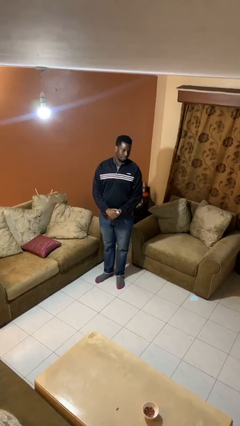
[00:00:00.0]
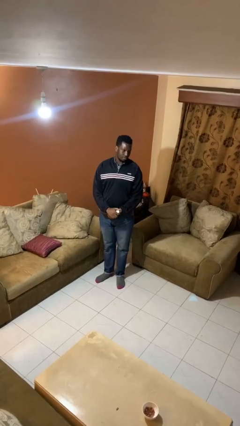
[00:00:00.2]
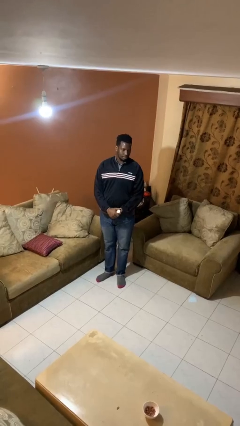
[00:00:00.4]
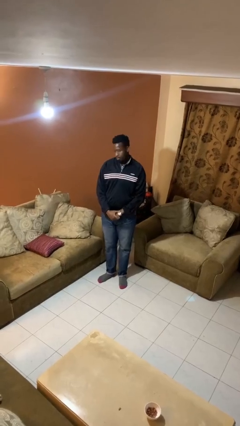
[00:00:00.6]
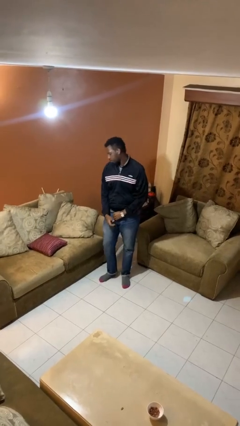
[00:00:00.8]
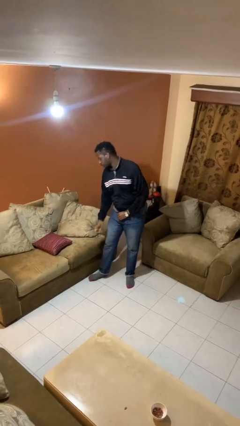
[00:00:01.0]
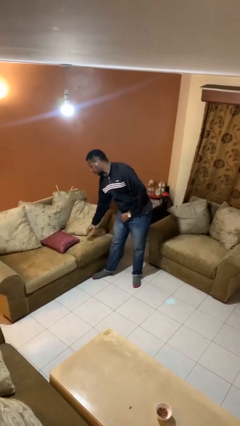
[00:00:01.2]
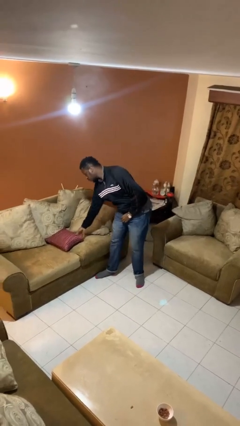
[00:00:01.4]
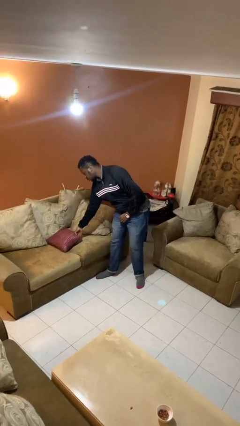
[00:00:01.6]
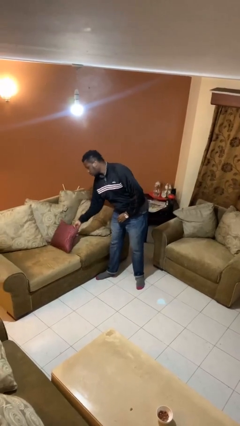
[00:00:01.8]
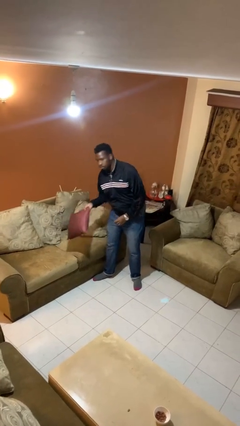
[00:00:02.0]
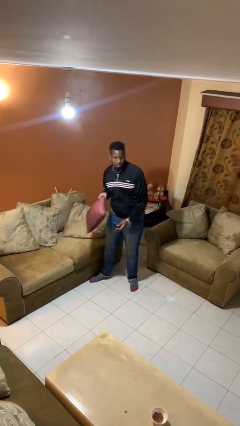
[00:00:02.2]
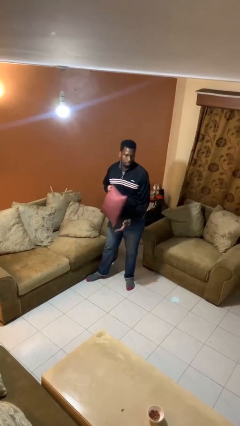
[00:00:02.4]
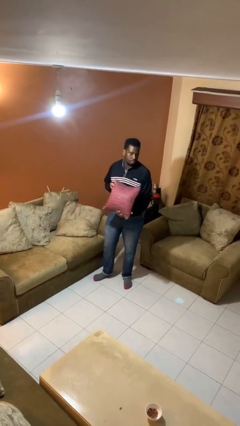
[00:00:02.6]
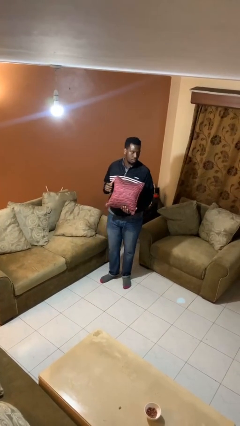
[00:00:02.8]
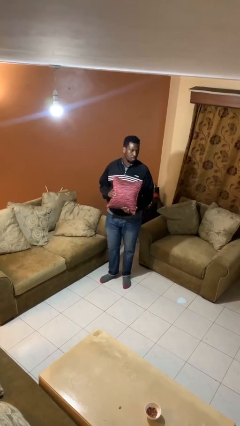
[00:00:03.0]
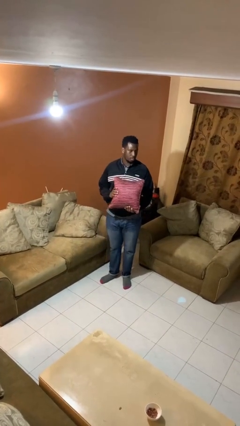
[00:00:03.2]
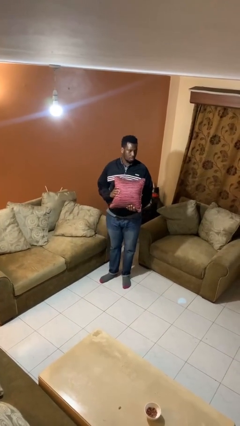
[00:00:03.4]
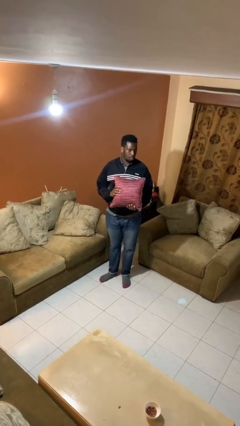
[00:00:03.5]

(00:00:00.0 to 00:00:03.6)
person picks up object from couch

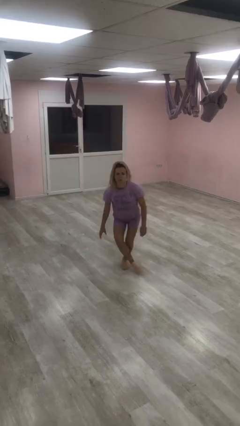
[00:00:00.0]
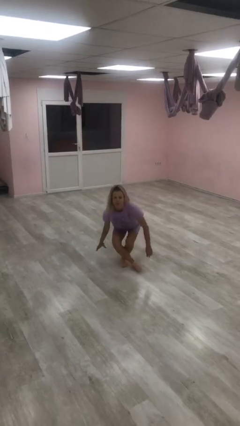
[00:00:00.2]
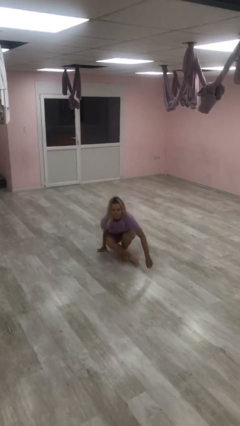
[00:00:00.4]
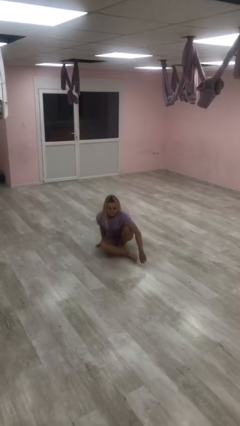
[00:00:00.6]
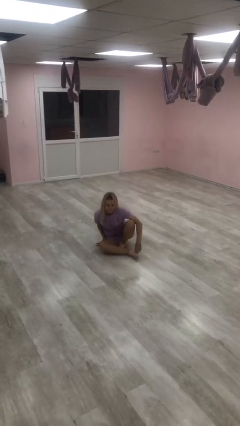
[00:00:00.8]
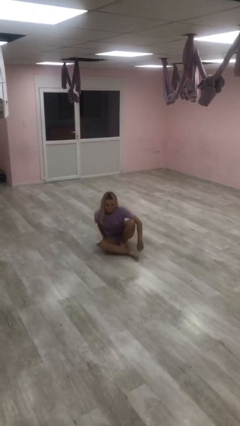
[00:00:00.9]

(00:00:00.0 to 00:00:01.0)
person sits crisscross

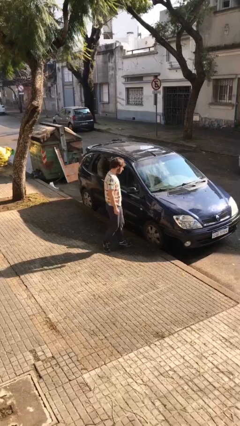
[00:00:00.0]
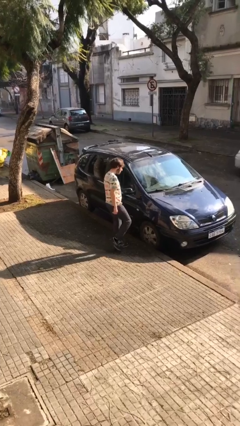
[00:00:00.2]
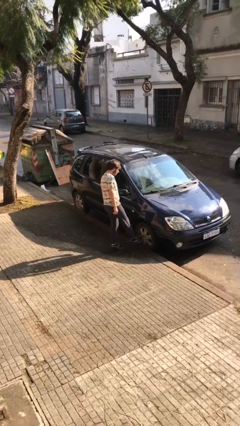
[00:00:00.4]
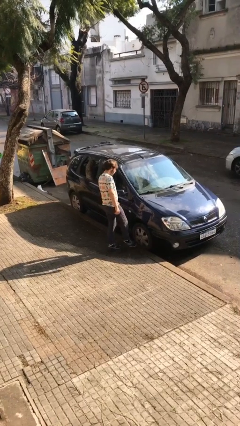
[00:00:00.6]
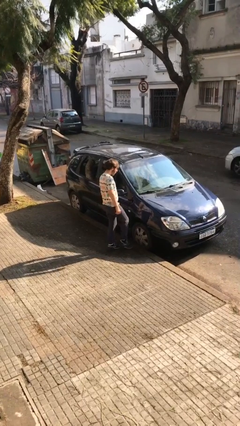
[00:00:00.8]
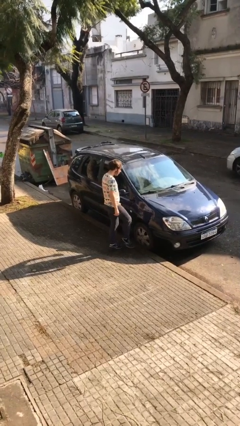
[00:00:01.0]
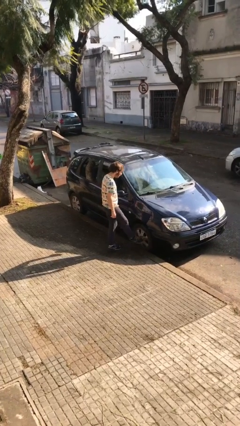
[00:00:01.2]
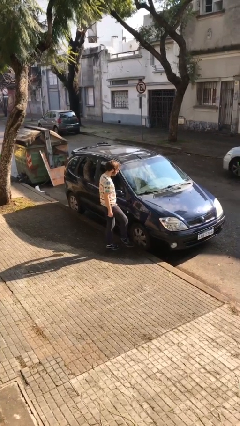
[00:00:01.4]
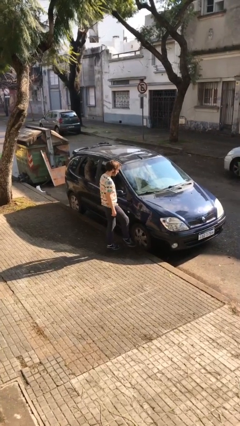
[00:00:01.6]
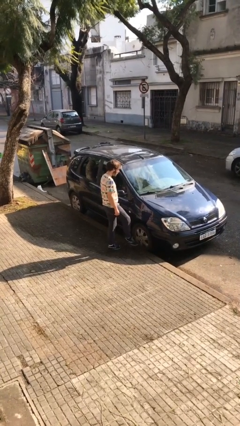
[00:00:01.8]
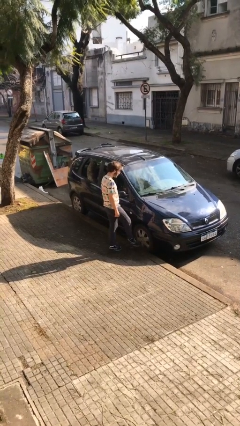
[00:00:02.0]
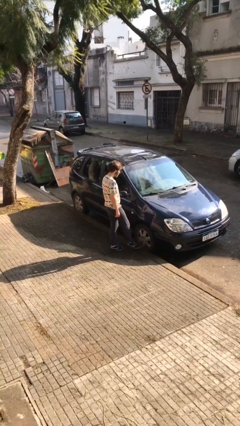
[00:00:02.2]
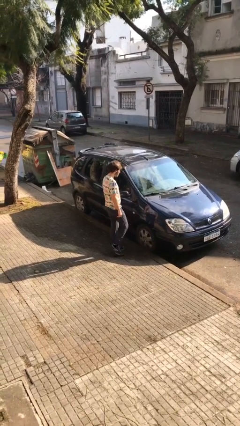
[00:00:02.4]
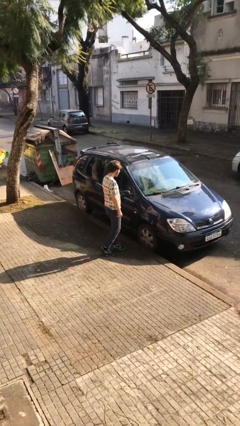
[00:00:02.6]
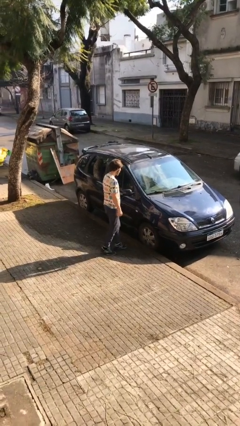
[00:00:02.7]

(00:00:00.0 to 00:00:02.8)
person kicks car tires

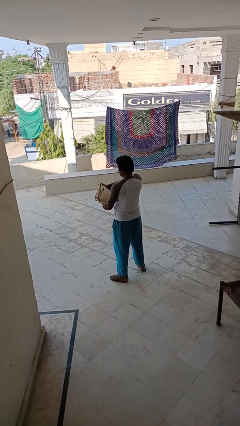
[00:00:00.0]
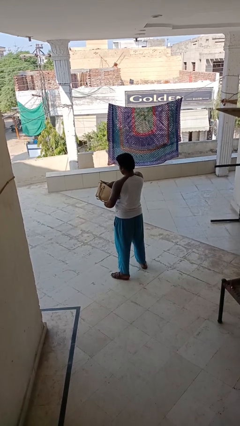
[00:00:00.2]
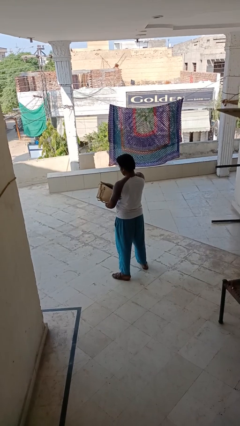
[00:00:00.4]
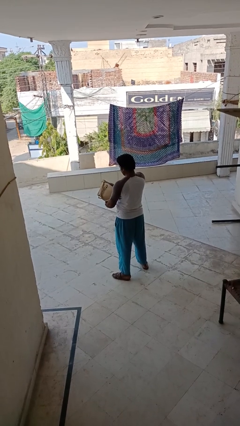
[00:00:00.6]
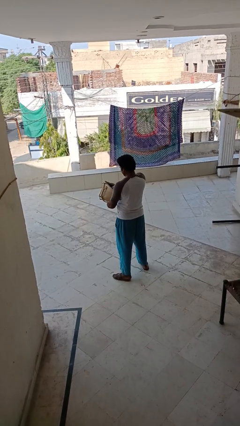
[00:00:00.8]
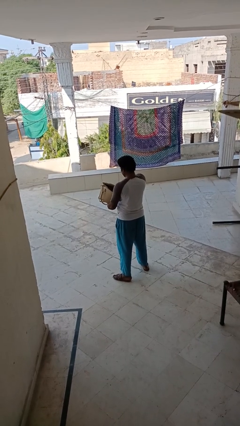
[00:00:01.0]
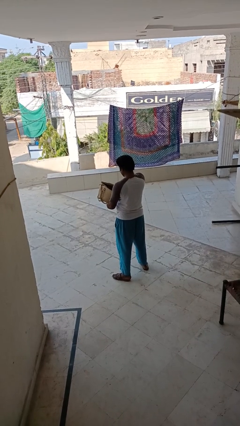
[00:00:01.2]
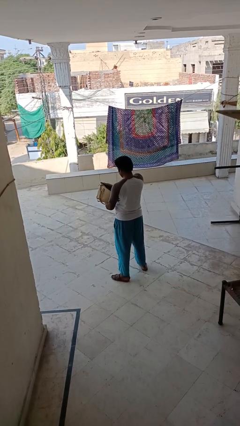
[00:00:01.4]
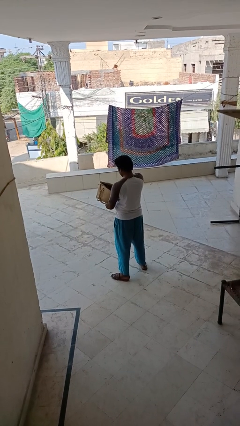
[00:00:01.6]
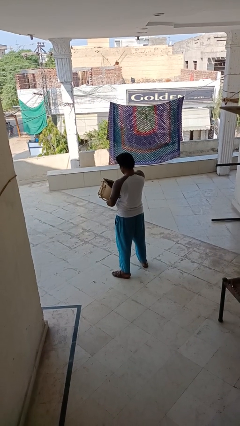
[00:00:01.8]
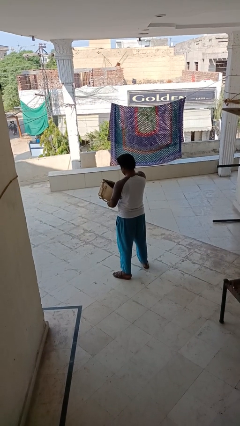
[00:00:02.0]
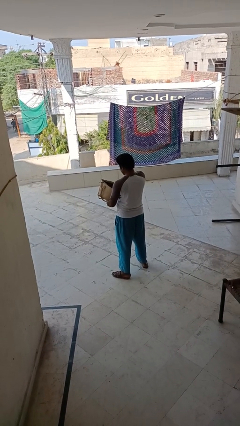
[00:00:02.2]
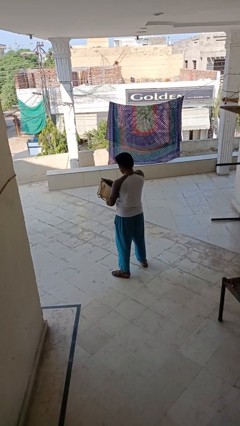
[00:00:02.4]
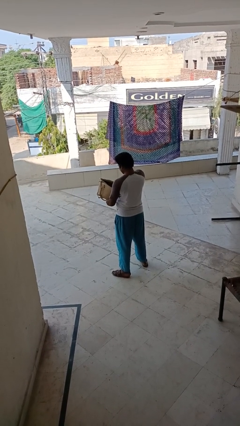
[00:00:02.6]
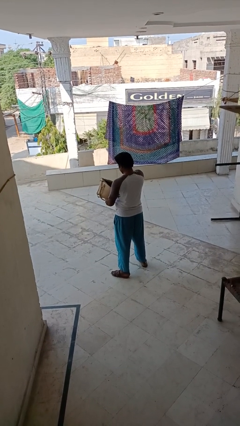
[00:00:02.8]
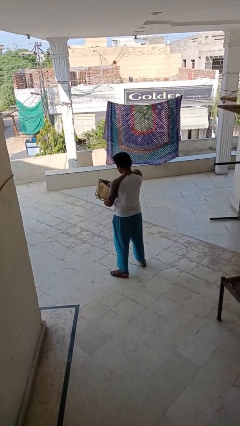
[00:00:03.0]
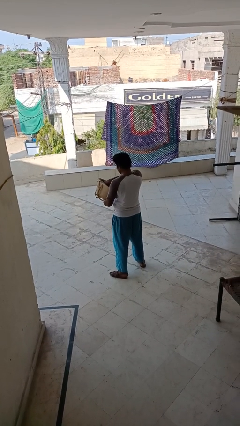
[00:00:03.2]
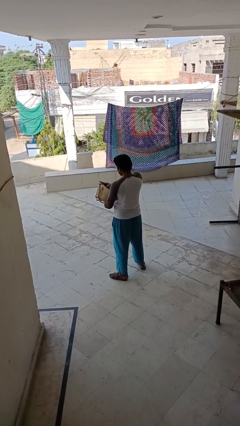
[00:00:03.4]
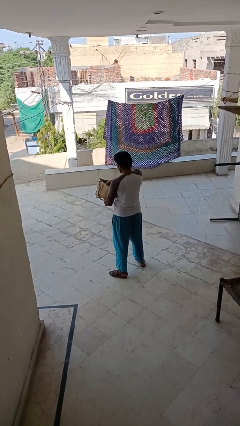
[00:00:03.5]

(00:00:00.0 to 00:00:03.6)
person searches in purse

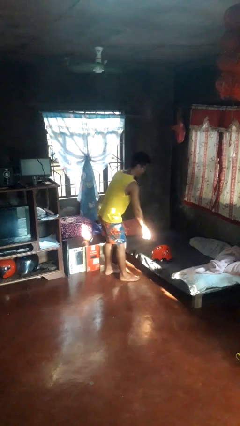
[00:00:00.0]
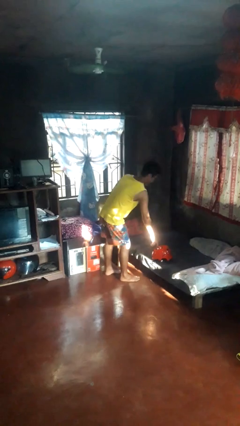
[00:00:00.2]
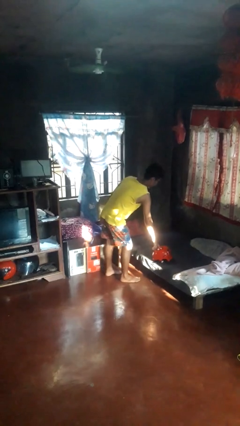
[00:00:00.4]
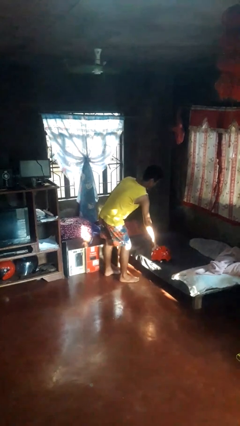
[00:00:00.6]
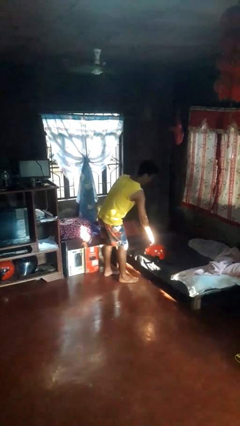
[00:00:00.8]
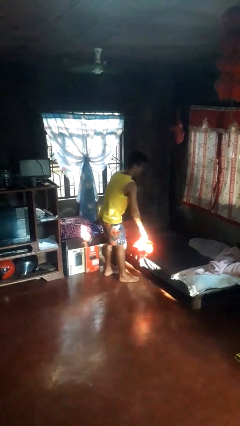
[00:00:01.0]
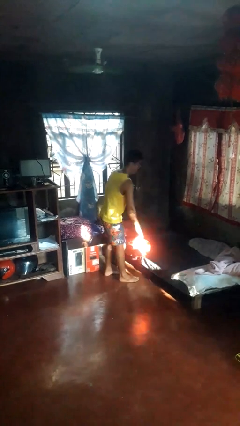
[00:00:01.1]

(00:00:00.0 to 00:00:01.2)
person picks up object from bed

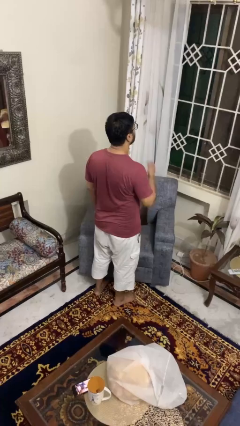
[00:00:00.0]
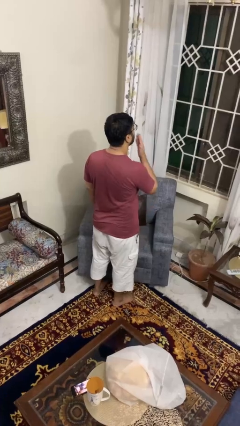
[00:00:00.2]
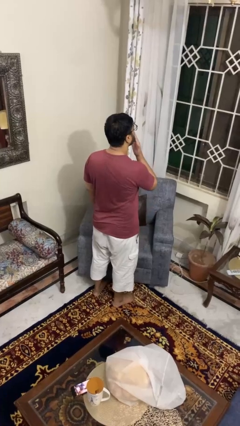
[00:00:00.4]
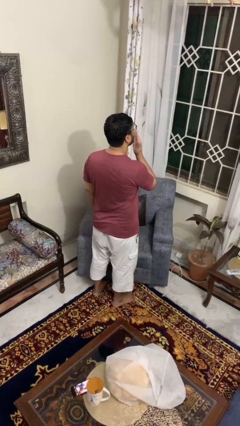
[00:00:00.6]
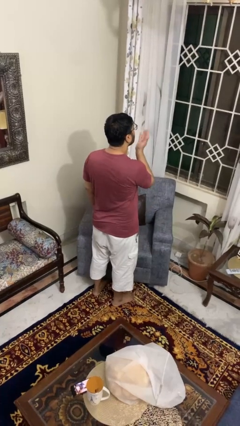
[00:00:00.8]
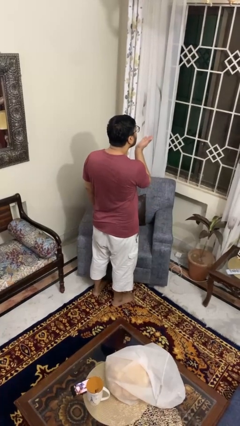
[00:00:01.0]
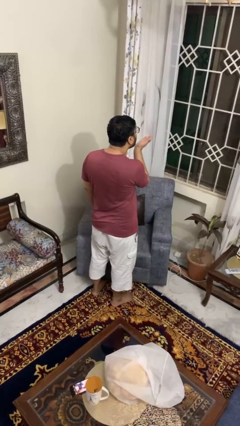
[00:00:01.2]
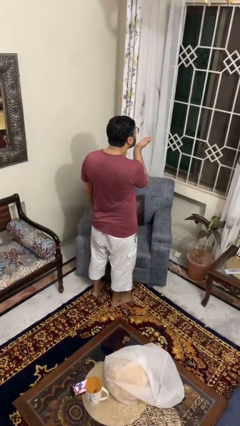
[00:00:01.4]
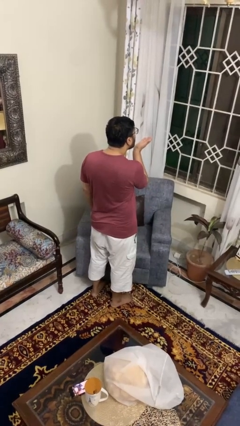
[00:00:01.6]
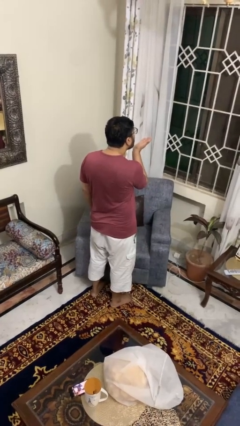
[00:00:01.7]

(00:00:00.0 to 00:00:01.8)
person gestures blow kiss

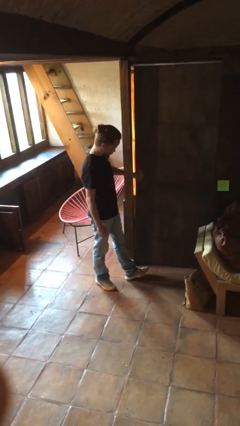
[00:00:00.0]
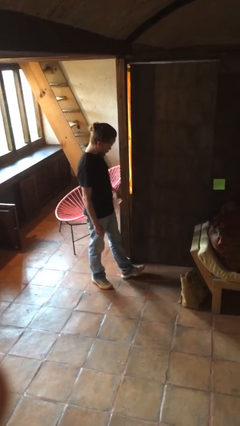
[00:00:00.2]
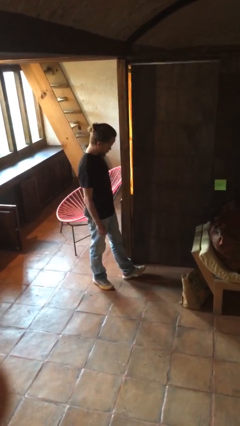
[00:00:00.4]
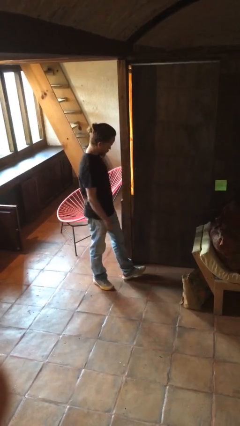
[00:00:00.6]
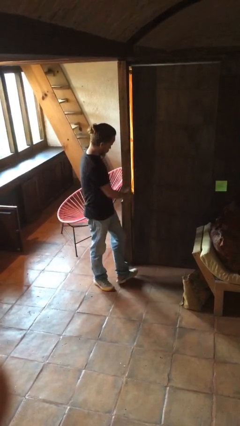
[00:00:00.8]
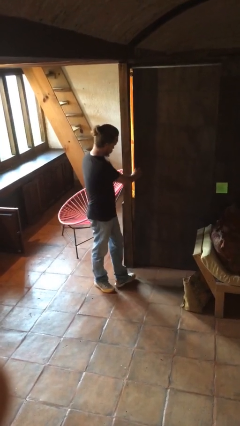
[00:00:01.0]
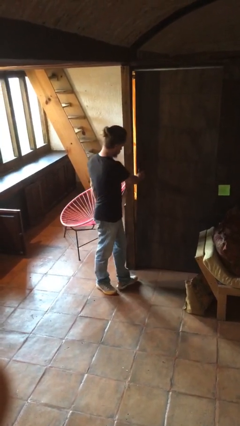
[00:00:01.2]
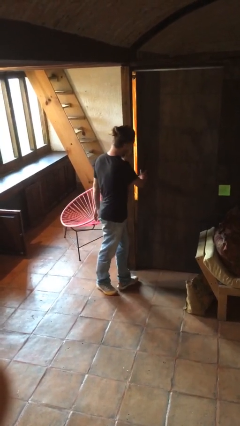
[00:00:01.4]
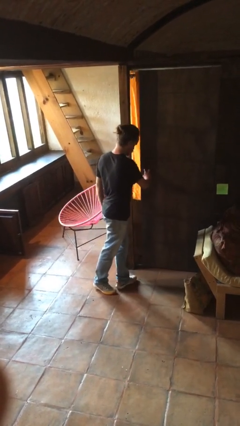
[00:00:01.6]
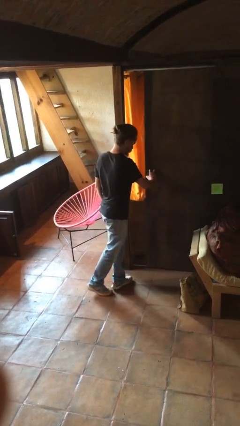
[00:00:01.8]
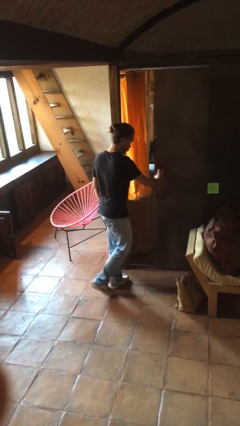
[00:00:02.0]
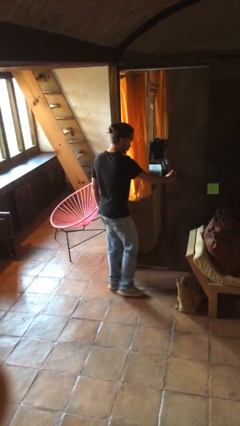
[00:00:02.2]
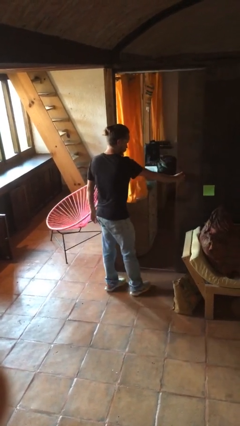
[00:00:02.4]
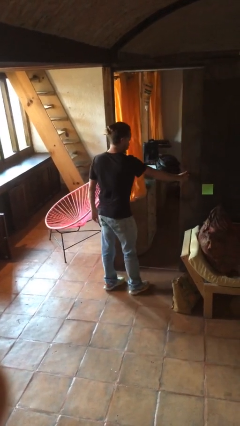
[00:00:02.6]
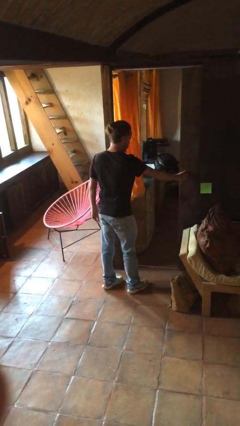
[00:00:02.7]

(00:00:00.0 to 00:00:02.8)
person opens sliding door
